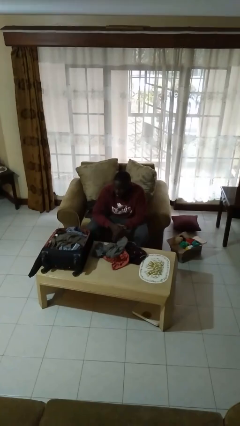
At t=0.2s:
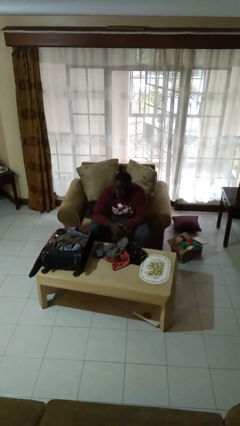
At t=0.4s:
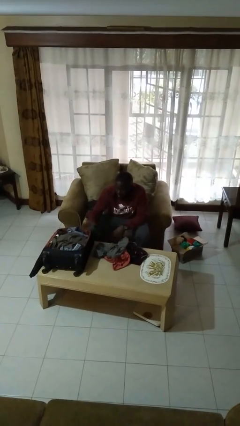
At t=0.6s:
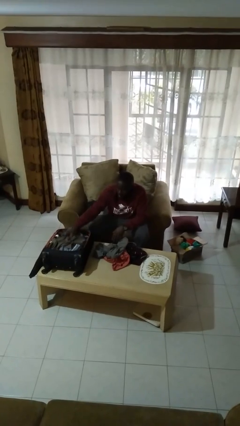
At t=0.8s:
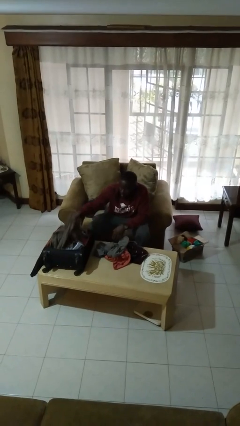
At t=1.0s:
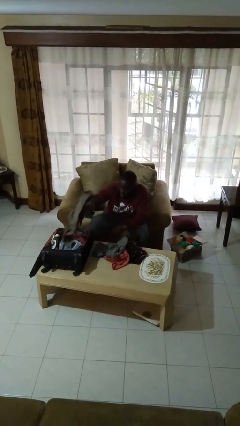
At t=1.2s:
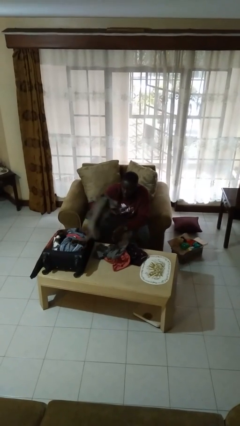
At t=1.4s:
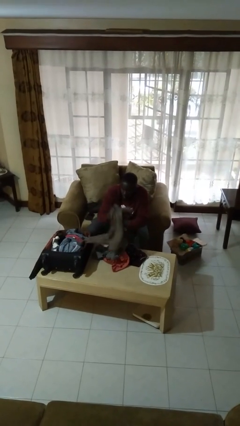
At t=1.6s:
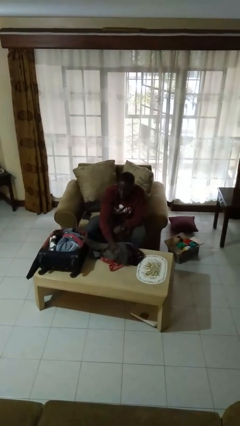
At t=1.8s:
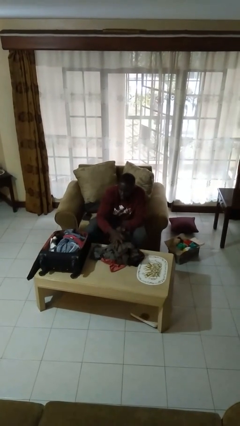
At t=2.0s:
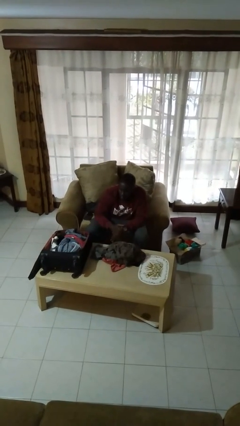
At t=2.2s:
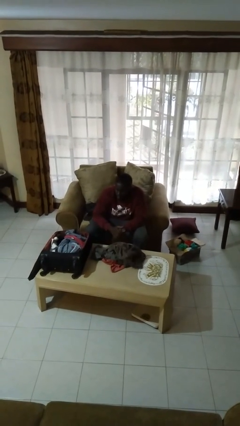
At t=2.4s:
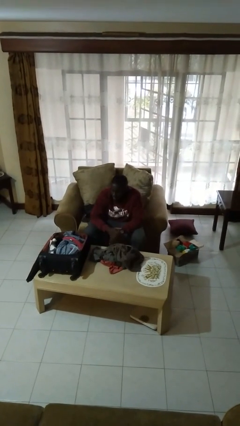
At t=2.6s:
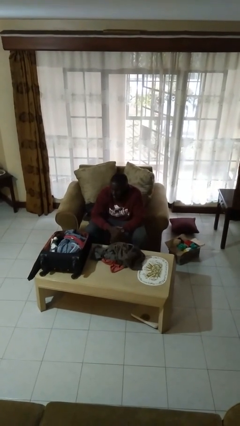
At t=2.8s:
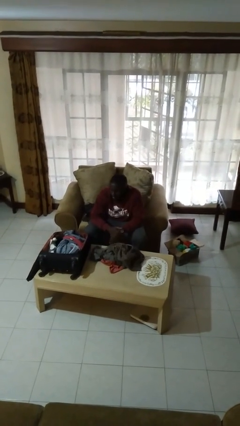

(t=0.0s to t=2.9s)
person unloads clothes from suitcase

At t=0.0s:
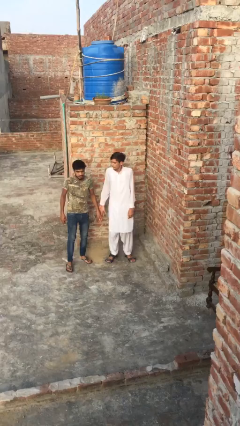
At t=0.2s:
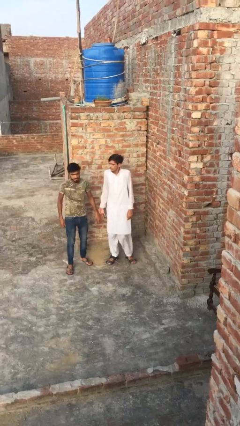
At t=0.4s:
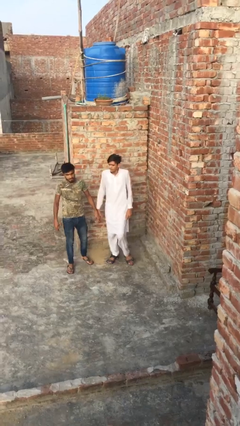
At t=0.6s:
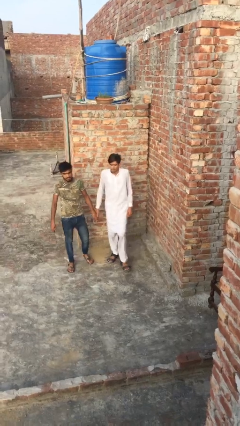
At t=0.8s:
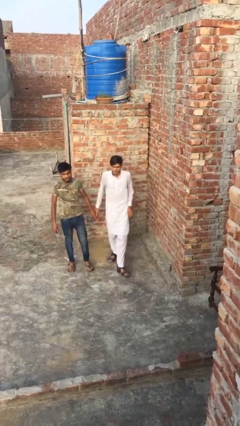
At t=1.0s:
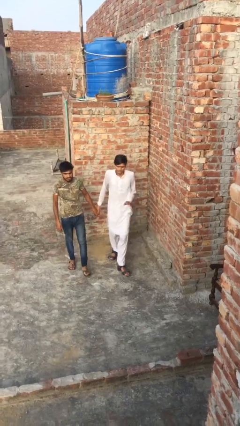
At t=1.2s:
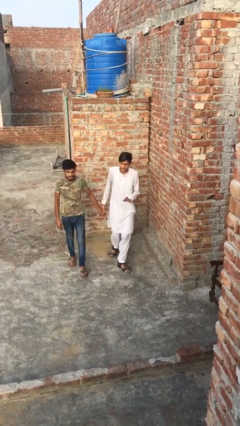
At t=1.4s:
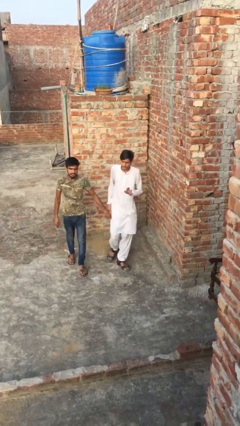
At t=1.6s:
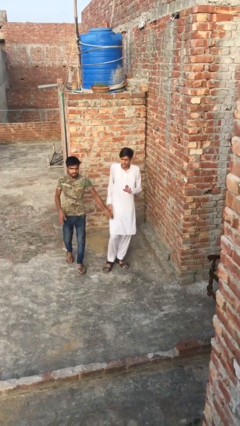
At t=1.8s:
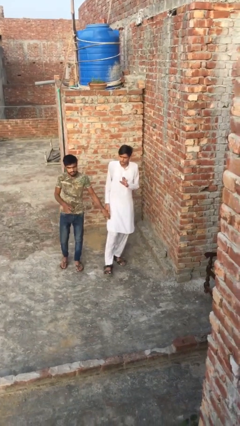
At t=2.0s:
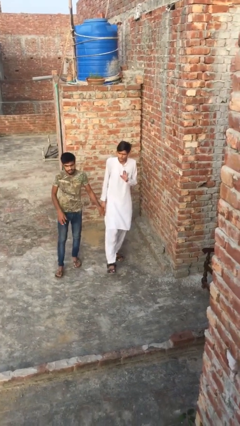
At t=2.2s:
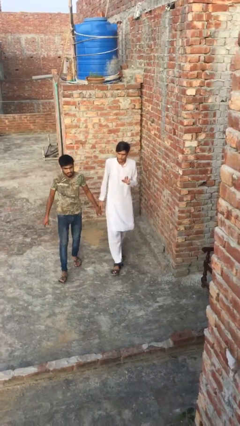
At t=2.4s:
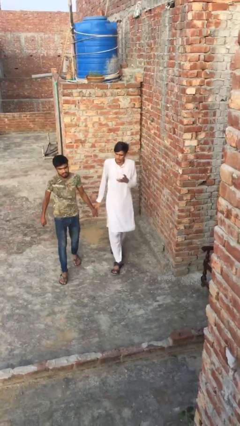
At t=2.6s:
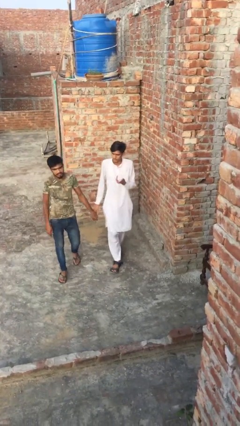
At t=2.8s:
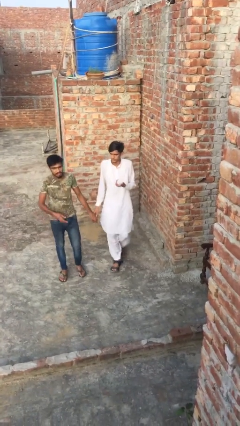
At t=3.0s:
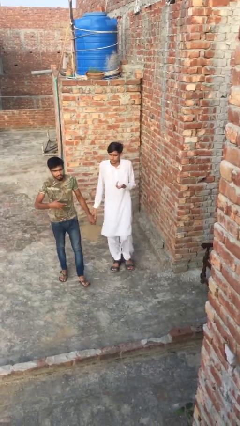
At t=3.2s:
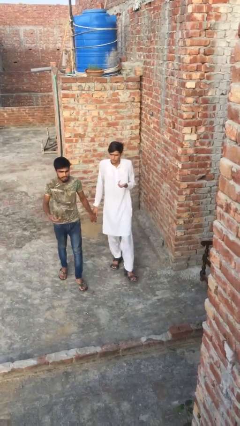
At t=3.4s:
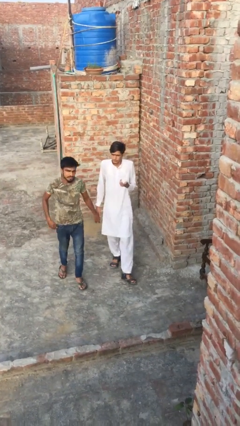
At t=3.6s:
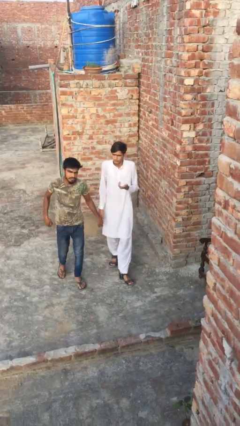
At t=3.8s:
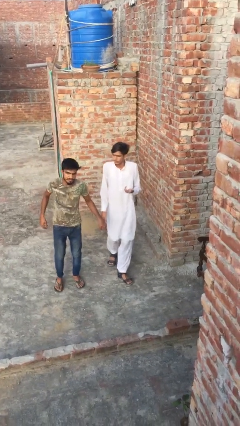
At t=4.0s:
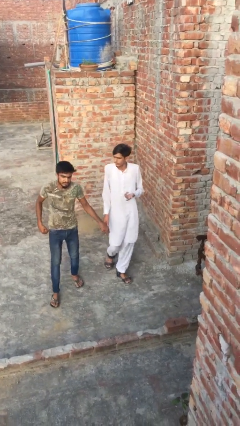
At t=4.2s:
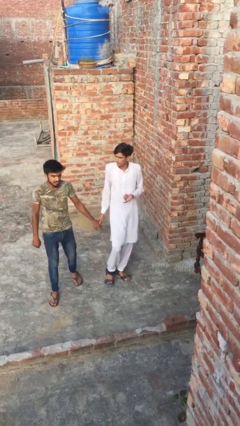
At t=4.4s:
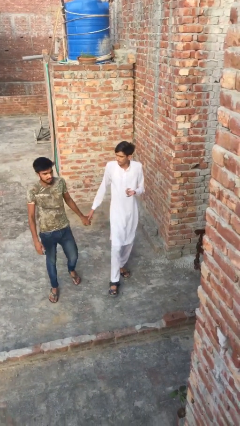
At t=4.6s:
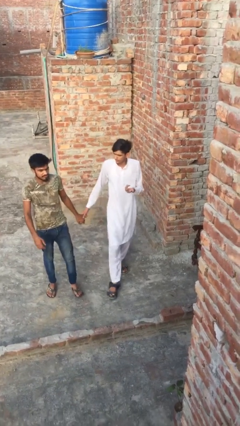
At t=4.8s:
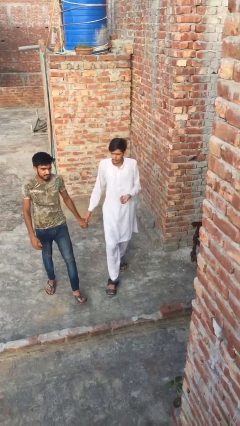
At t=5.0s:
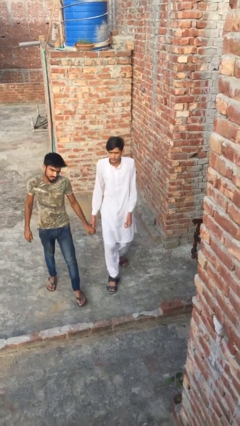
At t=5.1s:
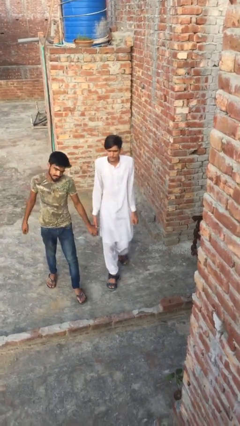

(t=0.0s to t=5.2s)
person holds hand

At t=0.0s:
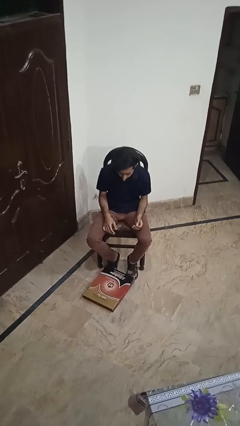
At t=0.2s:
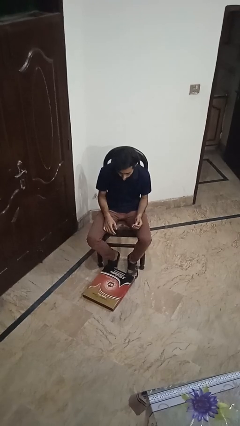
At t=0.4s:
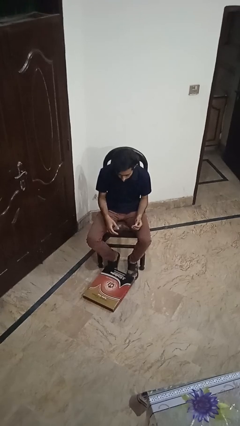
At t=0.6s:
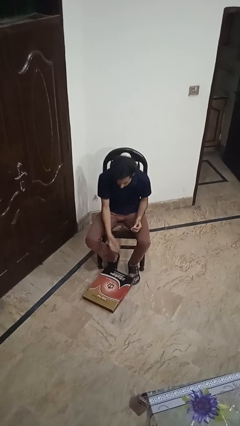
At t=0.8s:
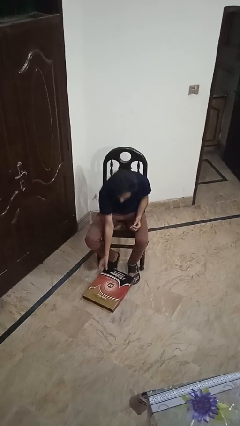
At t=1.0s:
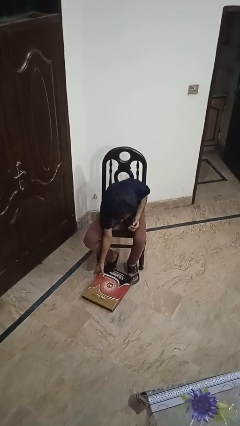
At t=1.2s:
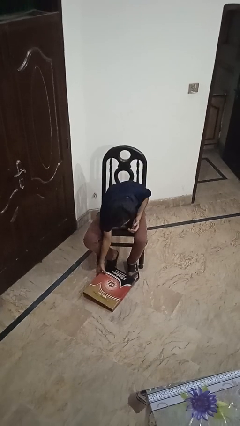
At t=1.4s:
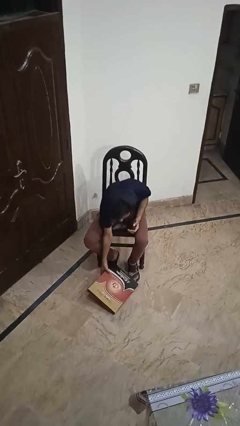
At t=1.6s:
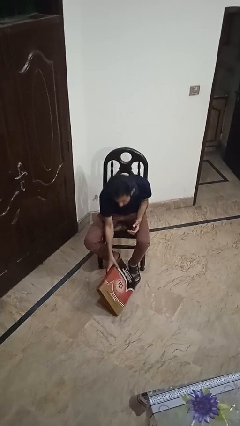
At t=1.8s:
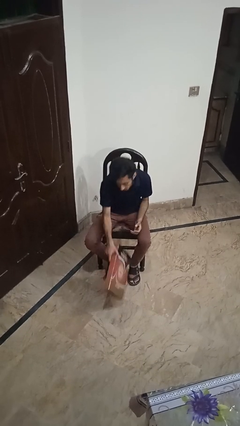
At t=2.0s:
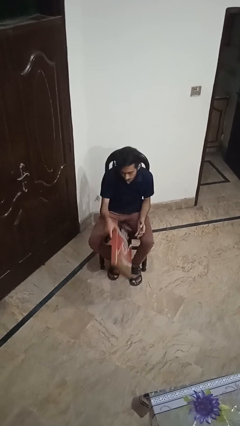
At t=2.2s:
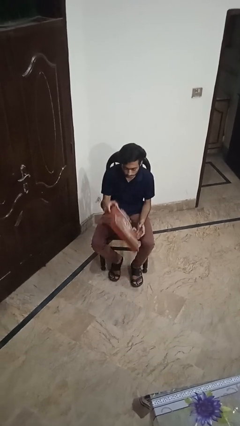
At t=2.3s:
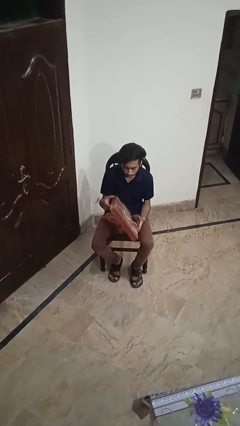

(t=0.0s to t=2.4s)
person picks up object from floor

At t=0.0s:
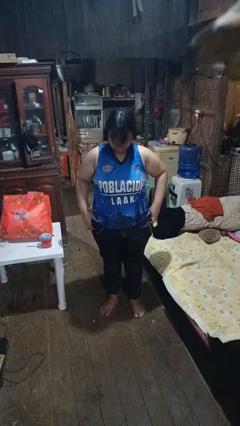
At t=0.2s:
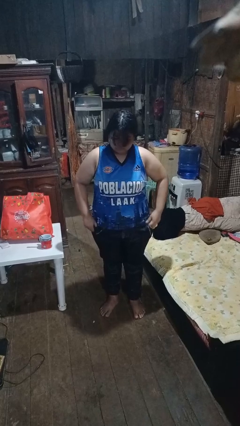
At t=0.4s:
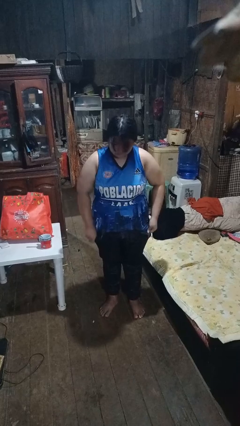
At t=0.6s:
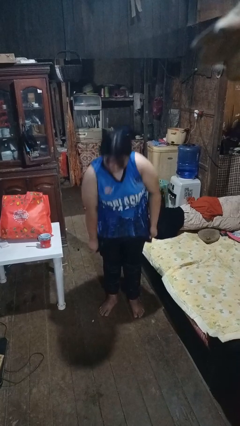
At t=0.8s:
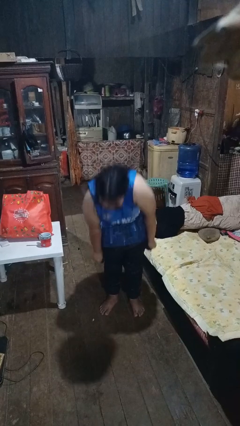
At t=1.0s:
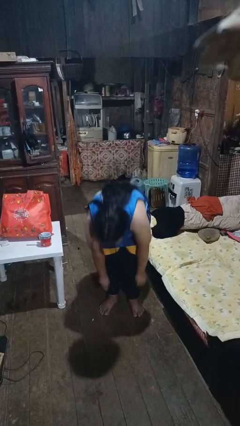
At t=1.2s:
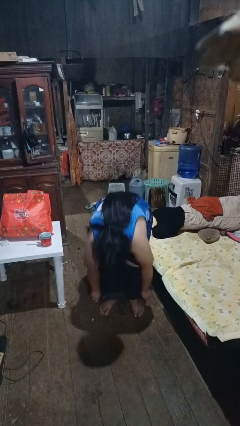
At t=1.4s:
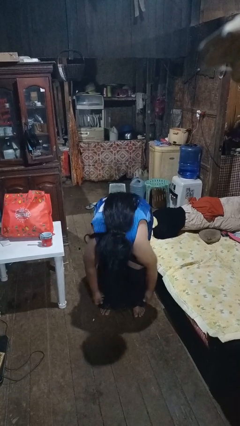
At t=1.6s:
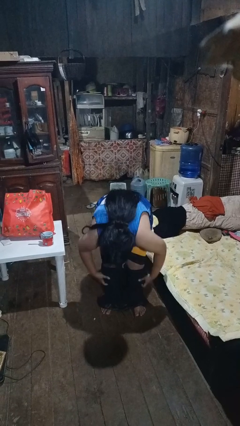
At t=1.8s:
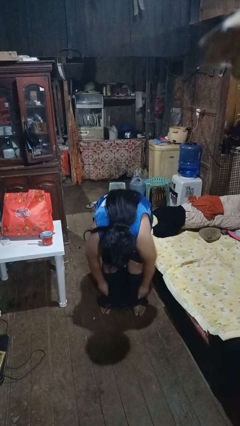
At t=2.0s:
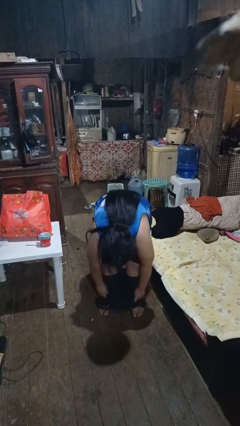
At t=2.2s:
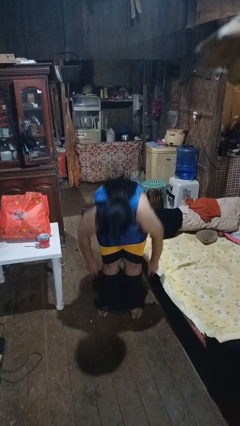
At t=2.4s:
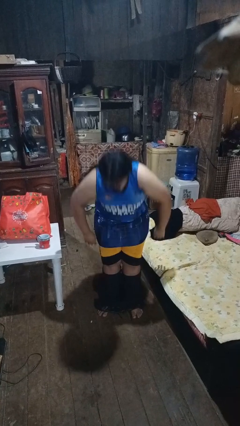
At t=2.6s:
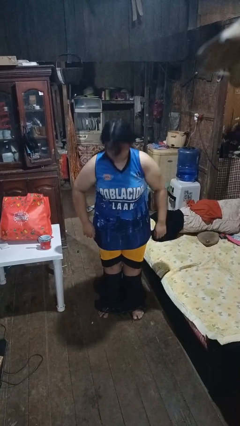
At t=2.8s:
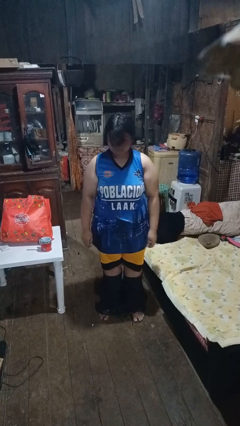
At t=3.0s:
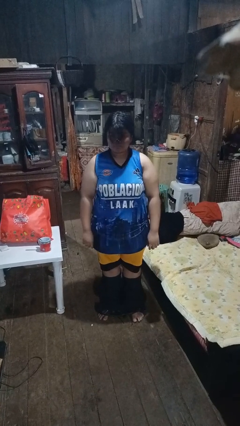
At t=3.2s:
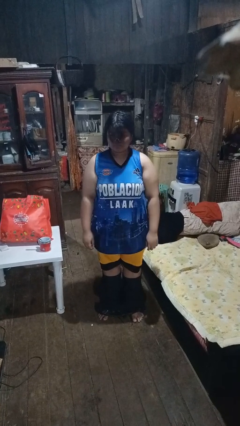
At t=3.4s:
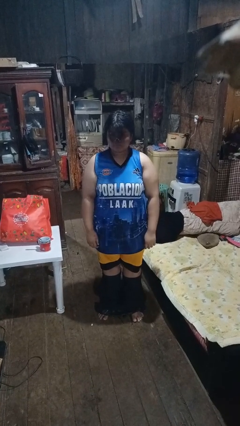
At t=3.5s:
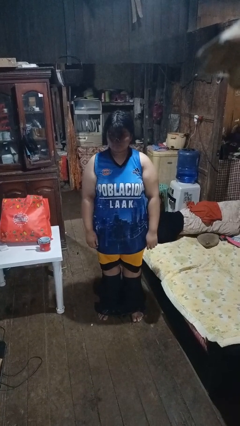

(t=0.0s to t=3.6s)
person takes off pants

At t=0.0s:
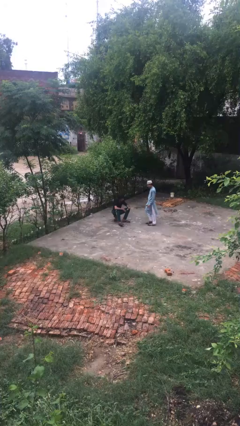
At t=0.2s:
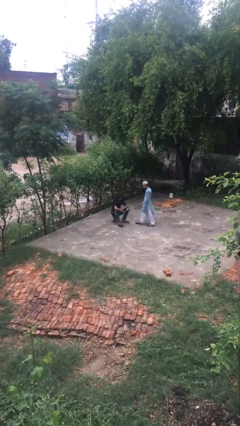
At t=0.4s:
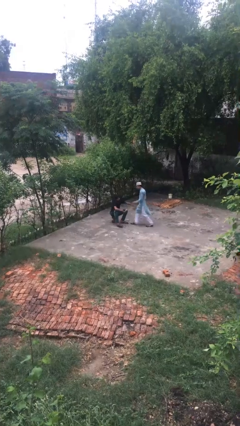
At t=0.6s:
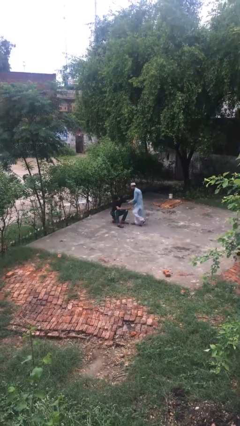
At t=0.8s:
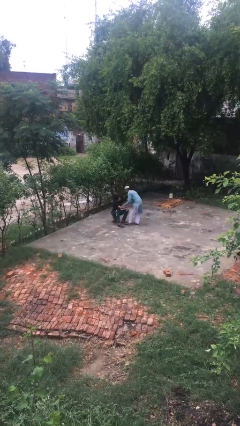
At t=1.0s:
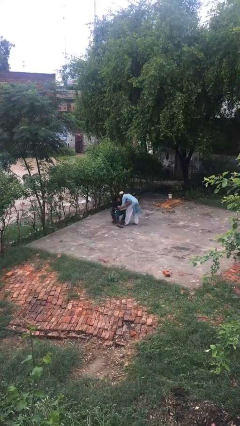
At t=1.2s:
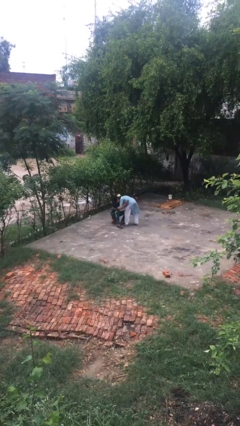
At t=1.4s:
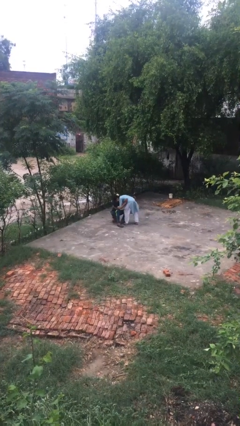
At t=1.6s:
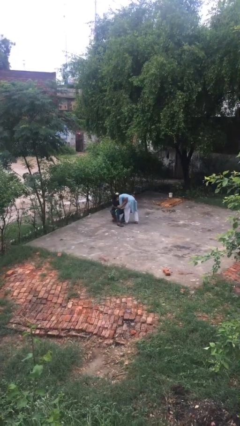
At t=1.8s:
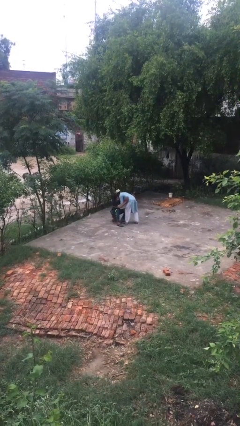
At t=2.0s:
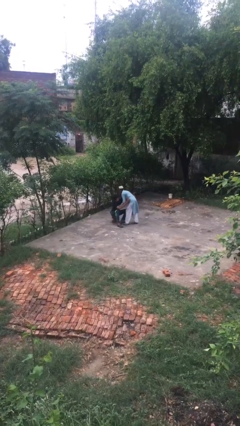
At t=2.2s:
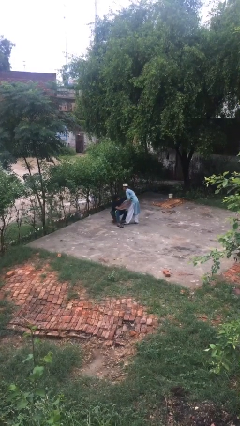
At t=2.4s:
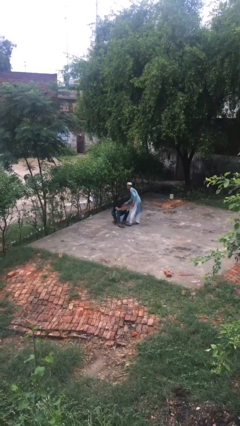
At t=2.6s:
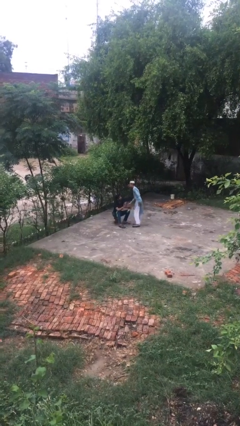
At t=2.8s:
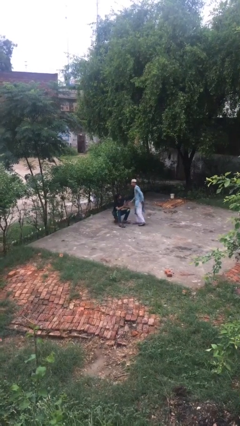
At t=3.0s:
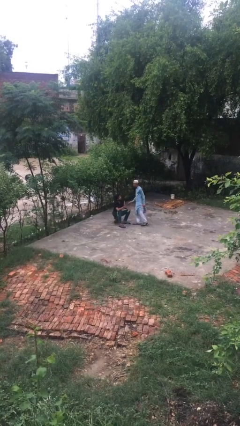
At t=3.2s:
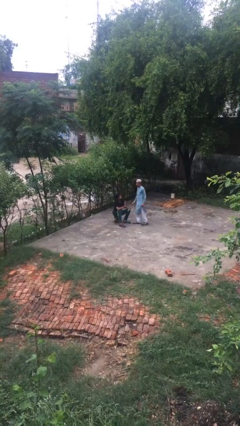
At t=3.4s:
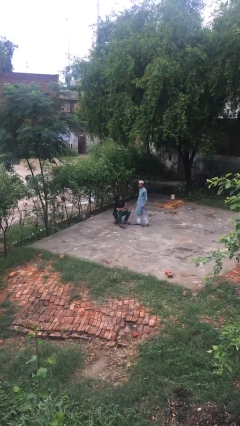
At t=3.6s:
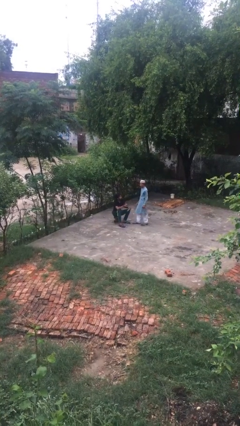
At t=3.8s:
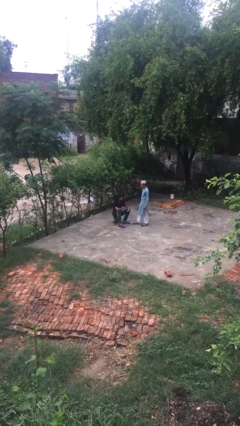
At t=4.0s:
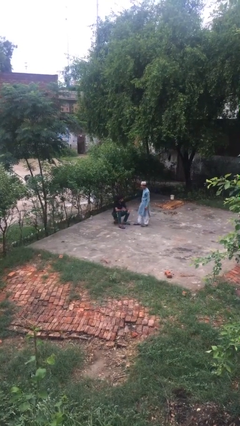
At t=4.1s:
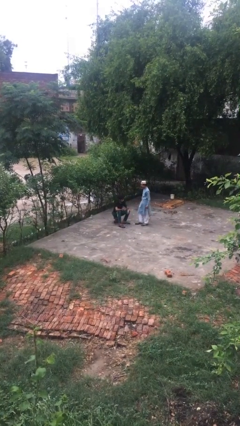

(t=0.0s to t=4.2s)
person embraces person
